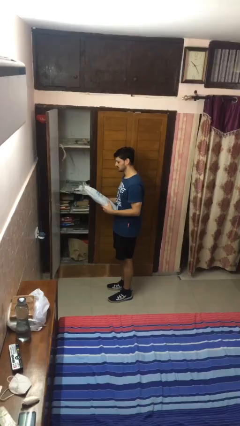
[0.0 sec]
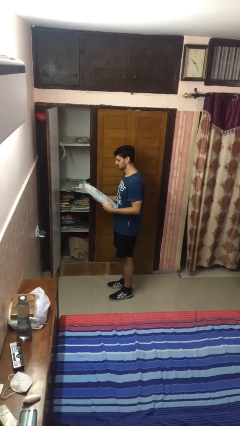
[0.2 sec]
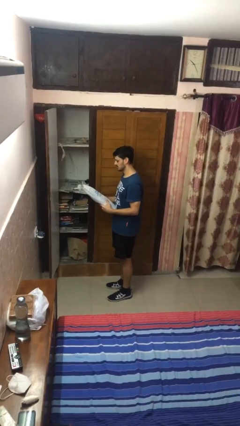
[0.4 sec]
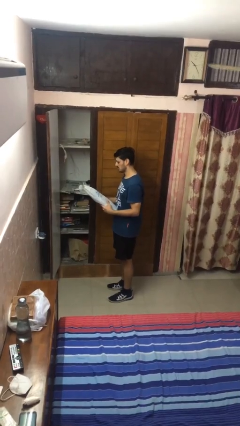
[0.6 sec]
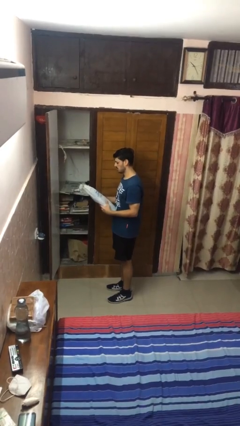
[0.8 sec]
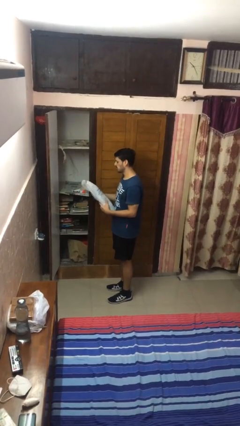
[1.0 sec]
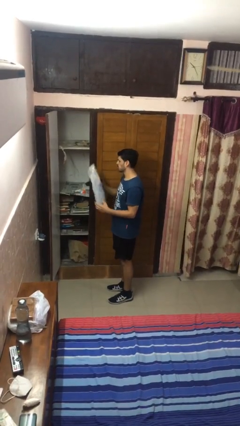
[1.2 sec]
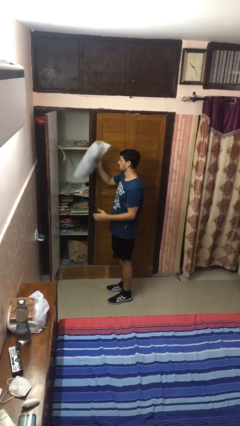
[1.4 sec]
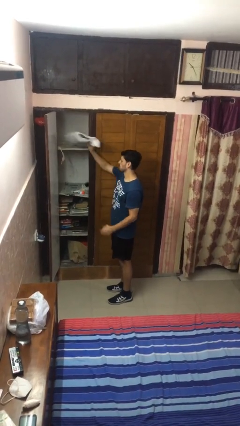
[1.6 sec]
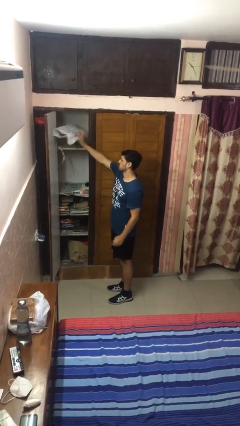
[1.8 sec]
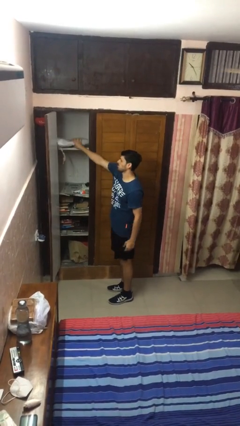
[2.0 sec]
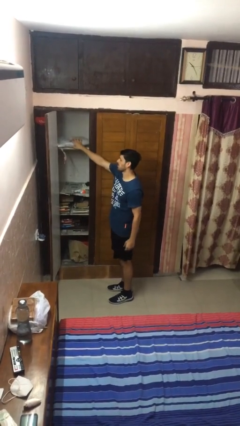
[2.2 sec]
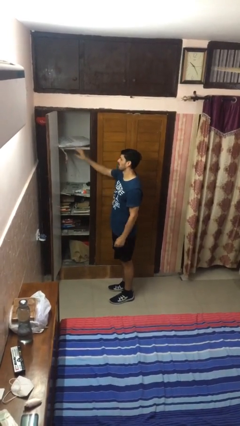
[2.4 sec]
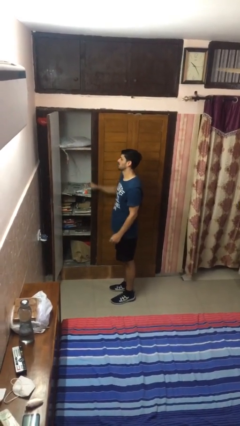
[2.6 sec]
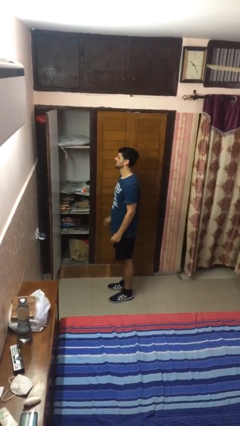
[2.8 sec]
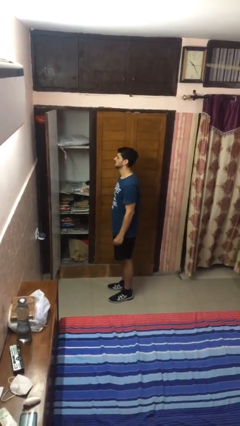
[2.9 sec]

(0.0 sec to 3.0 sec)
person puts down object on shelf

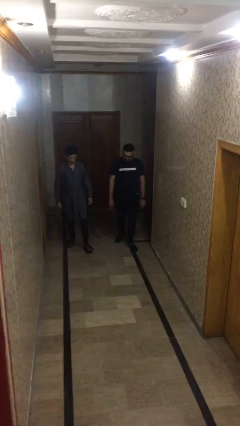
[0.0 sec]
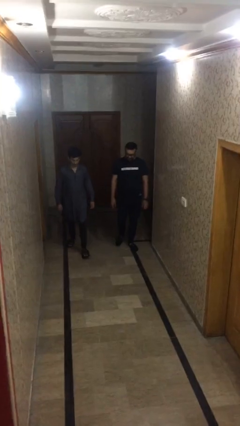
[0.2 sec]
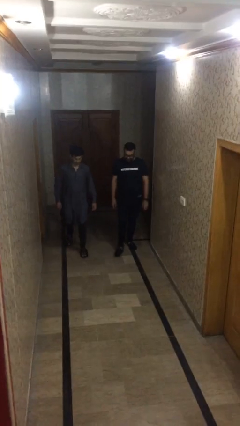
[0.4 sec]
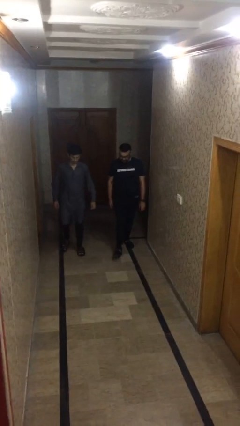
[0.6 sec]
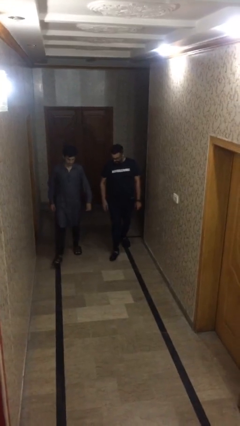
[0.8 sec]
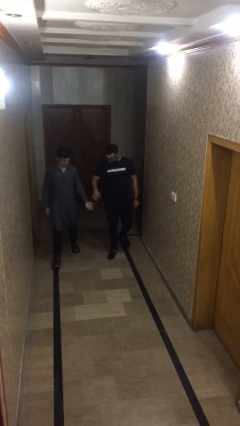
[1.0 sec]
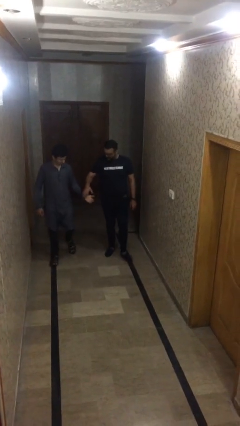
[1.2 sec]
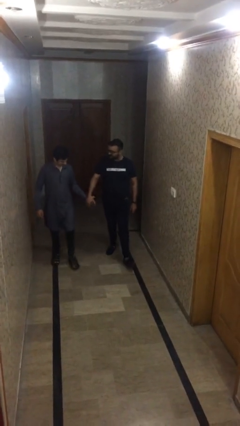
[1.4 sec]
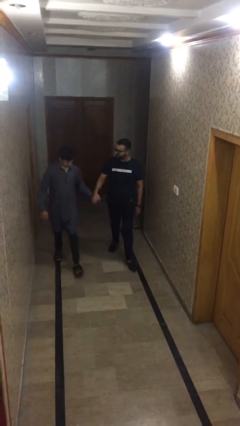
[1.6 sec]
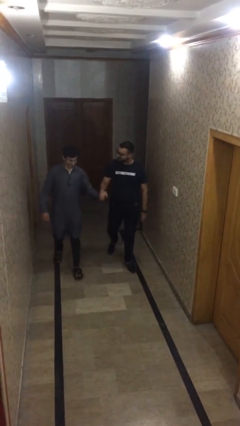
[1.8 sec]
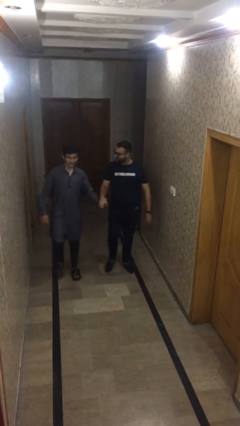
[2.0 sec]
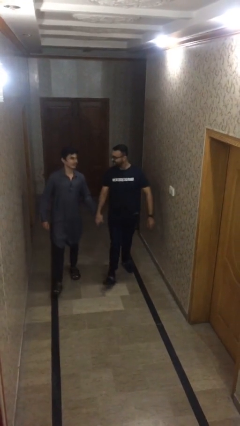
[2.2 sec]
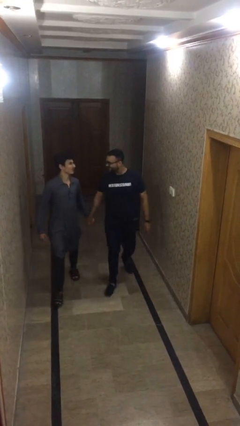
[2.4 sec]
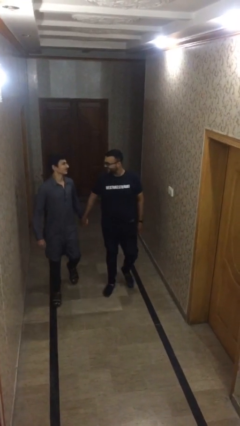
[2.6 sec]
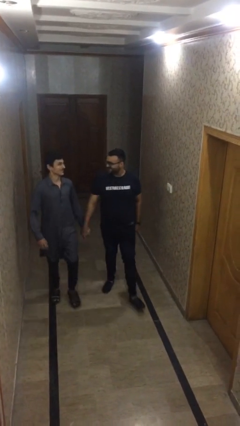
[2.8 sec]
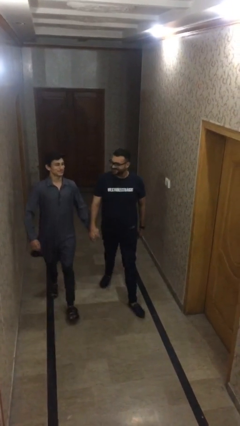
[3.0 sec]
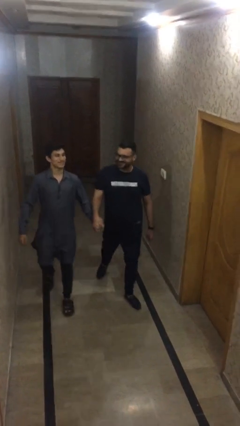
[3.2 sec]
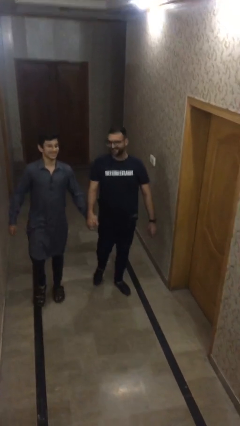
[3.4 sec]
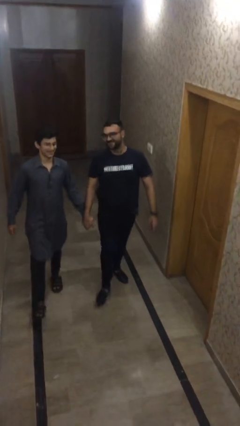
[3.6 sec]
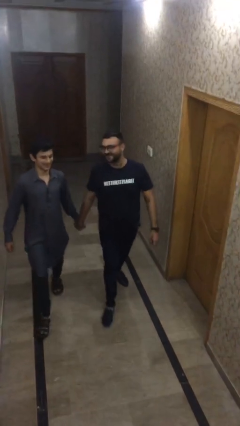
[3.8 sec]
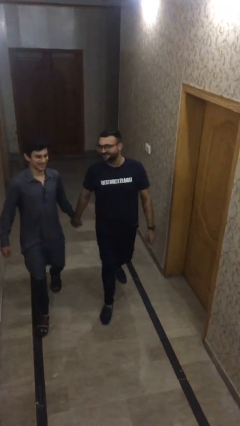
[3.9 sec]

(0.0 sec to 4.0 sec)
person holds hand

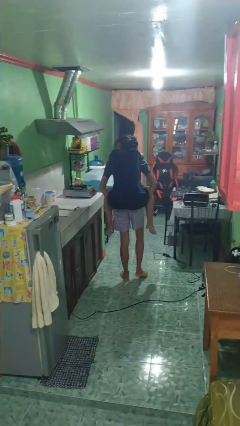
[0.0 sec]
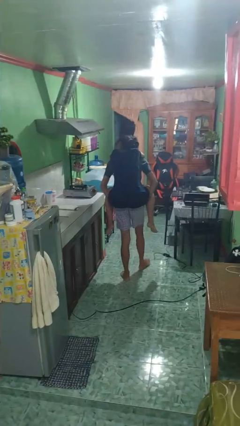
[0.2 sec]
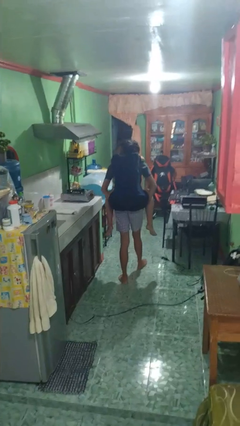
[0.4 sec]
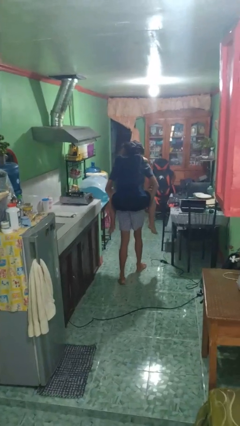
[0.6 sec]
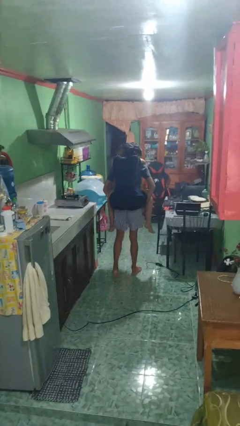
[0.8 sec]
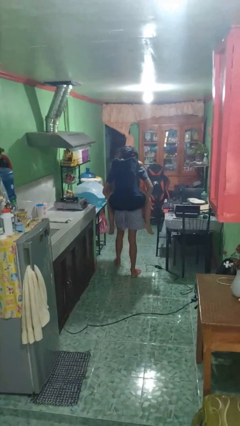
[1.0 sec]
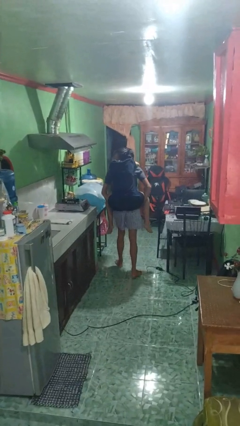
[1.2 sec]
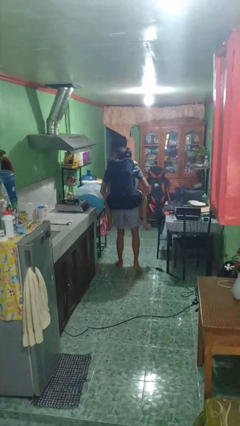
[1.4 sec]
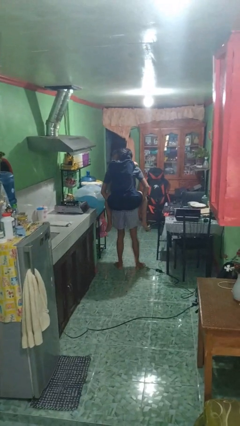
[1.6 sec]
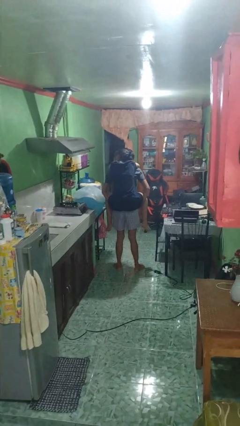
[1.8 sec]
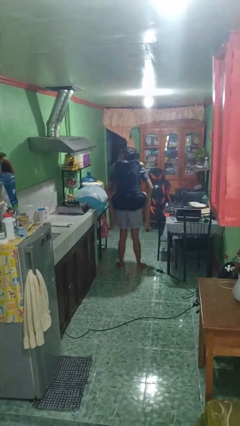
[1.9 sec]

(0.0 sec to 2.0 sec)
person carries person on back

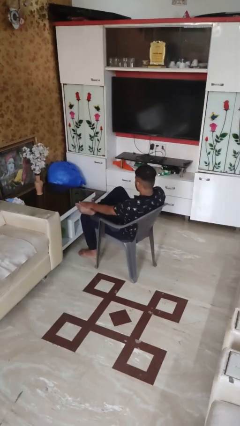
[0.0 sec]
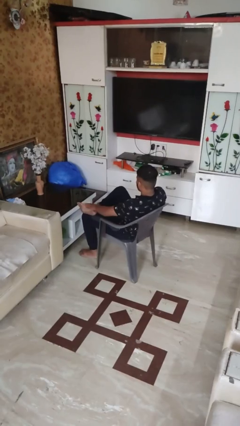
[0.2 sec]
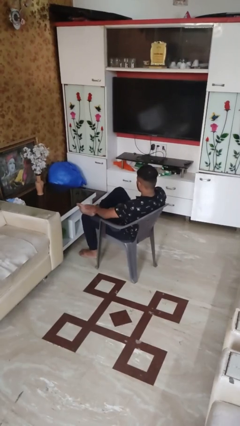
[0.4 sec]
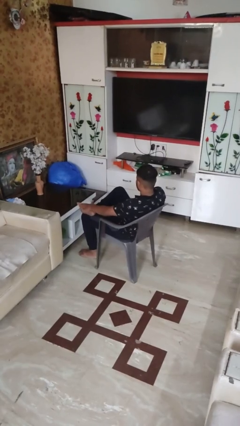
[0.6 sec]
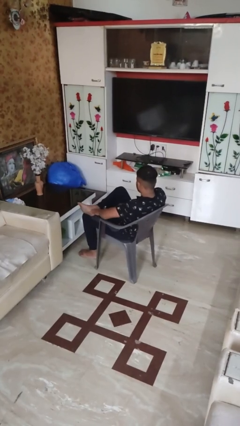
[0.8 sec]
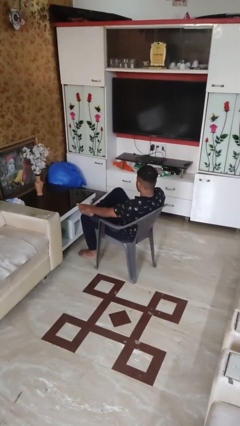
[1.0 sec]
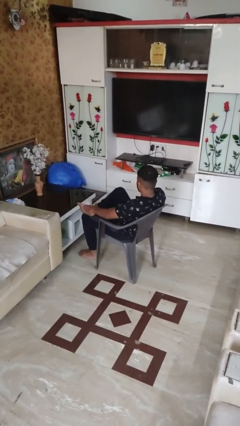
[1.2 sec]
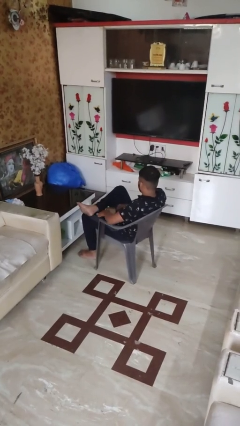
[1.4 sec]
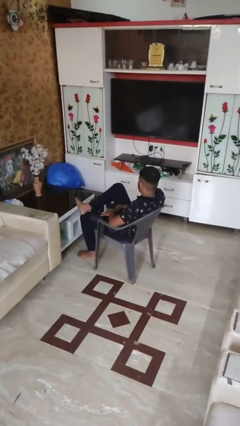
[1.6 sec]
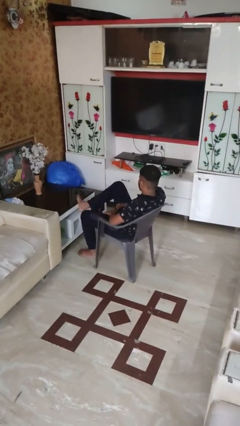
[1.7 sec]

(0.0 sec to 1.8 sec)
person rubs foot

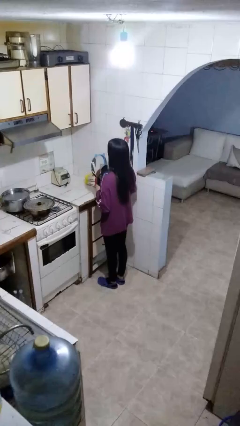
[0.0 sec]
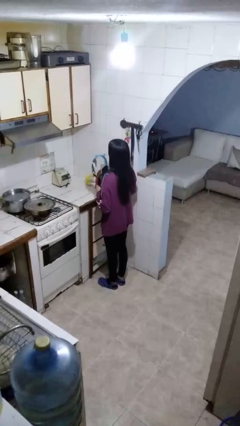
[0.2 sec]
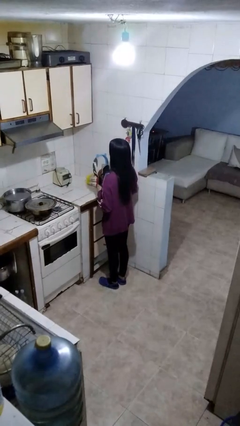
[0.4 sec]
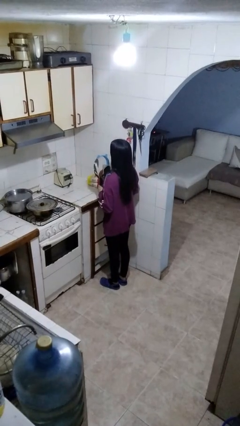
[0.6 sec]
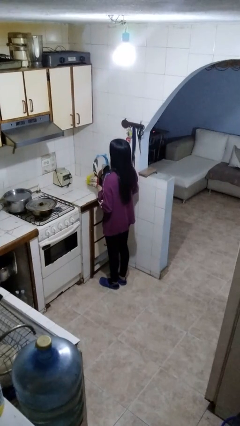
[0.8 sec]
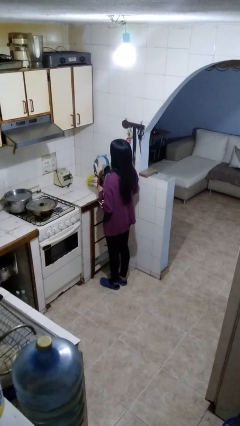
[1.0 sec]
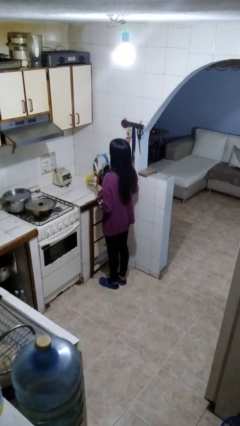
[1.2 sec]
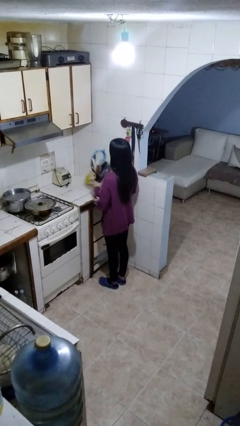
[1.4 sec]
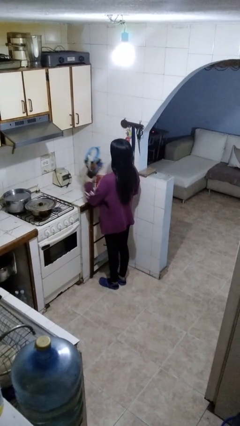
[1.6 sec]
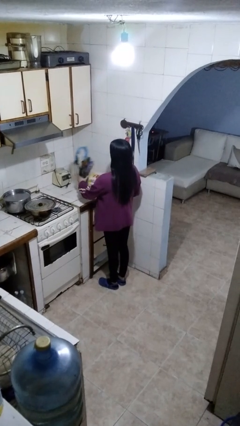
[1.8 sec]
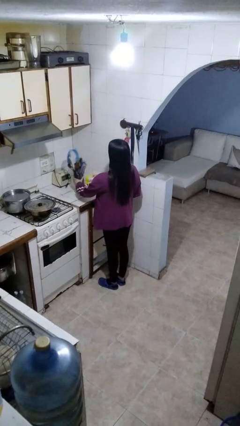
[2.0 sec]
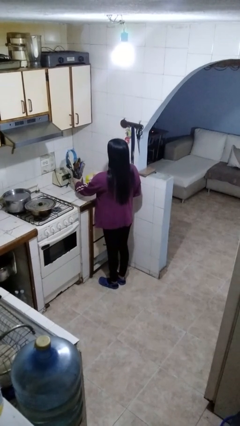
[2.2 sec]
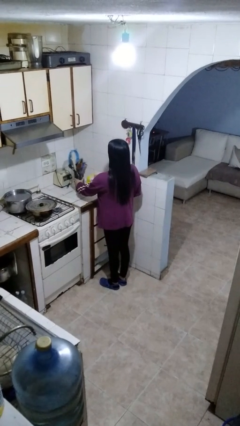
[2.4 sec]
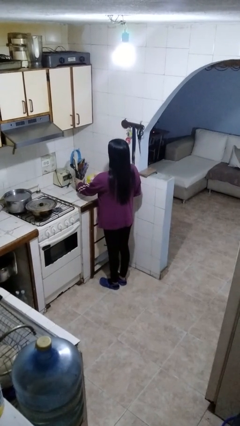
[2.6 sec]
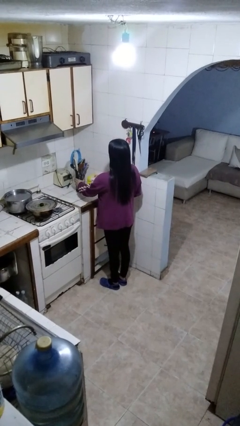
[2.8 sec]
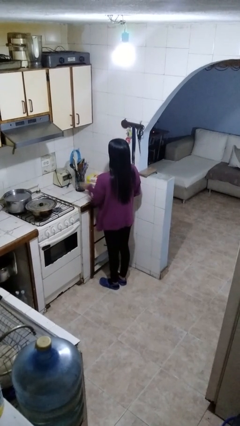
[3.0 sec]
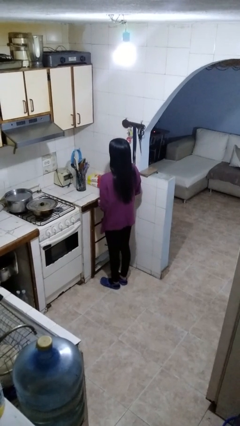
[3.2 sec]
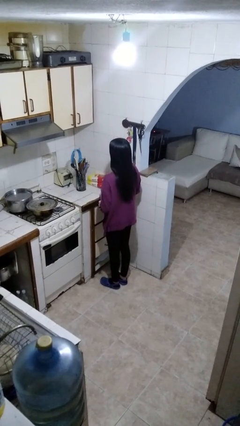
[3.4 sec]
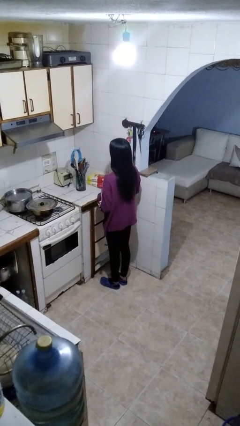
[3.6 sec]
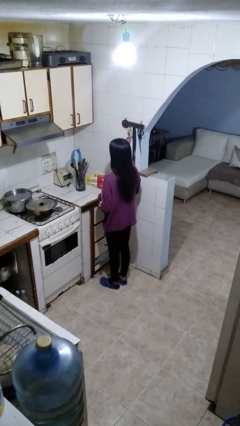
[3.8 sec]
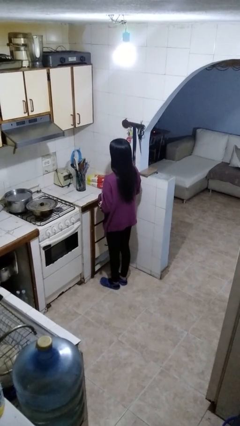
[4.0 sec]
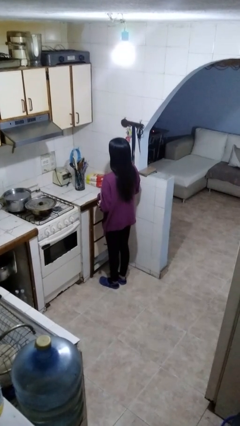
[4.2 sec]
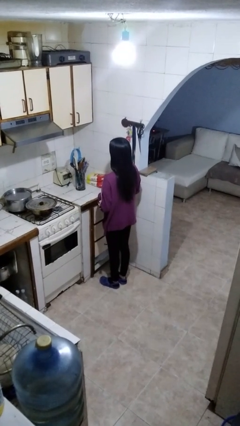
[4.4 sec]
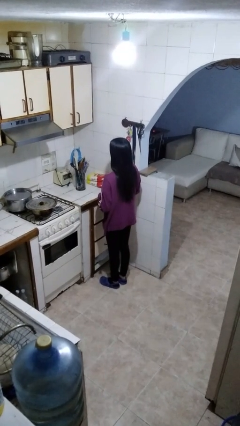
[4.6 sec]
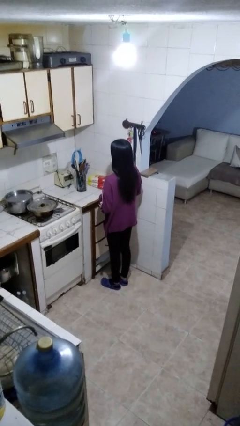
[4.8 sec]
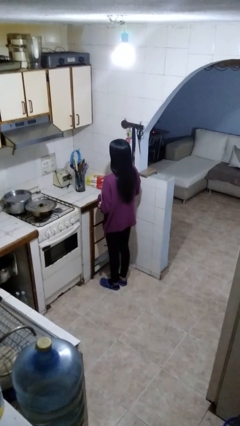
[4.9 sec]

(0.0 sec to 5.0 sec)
person picks up object from countertop

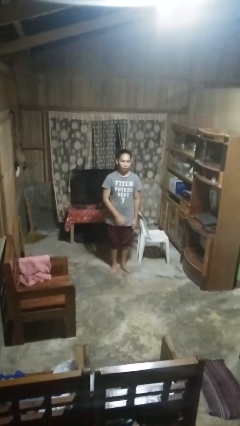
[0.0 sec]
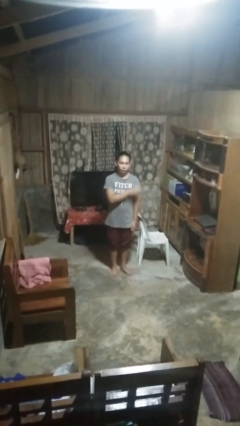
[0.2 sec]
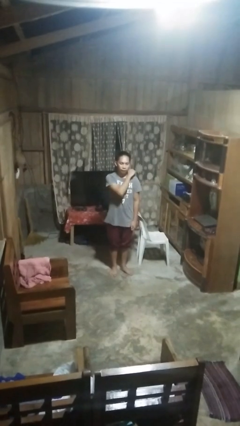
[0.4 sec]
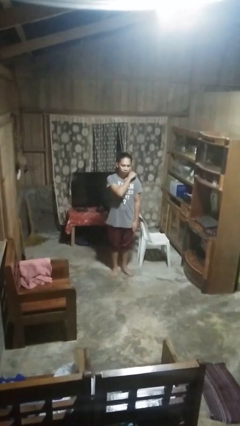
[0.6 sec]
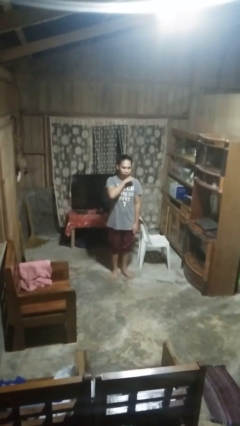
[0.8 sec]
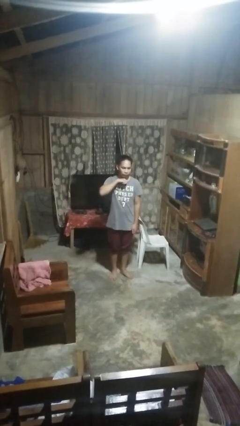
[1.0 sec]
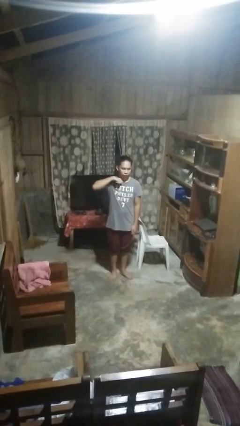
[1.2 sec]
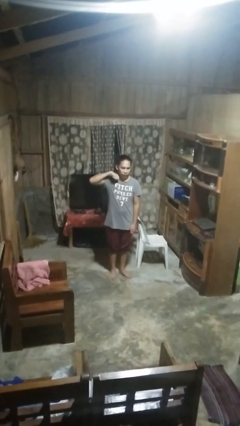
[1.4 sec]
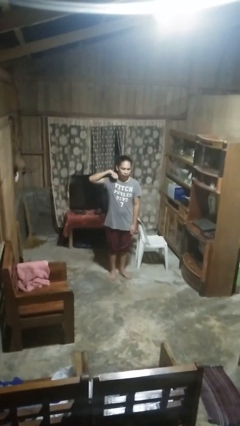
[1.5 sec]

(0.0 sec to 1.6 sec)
person gestures cut
